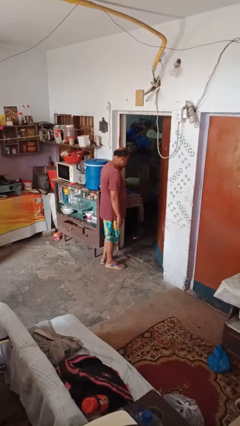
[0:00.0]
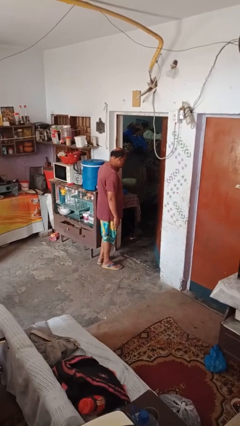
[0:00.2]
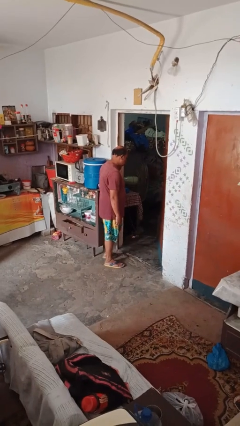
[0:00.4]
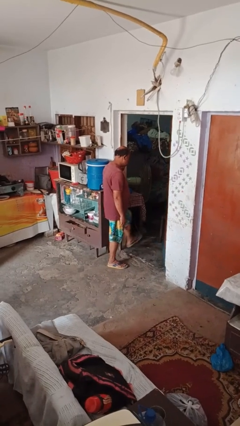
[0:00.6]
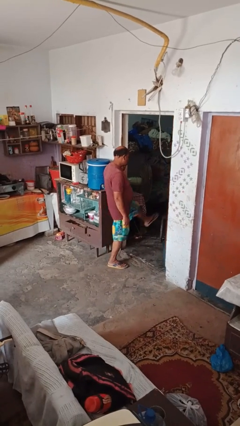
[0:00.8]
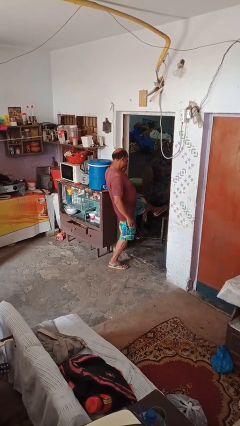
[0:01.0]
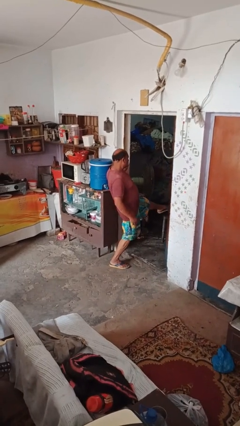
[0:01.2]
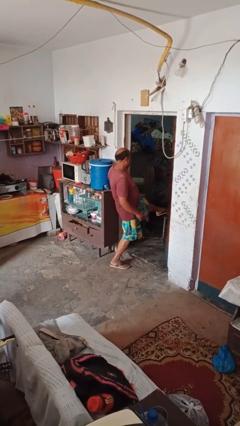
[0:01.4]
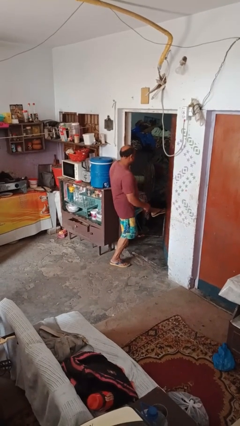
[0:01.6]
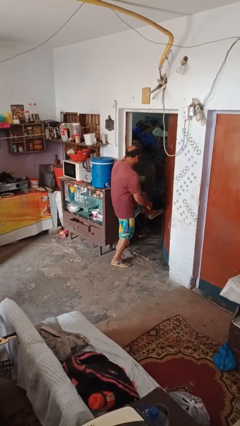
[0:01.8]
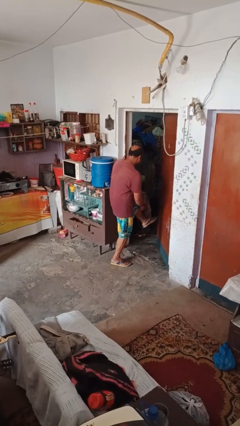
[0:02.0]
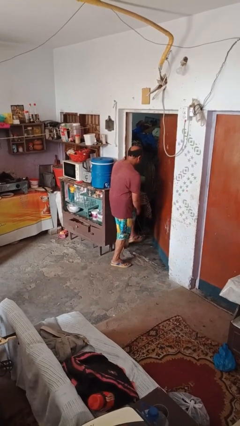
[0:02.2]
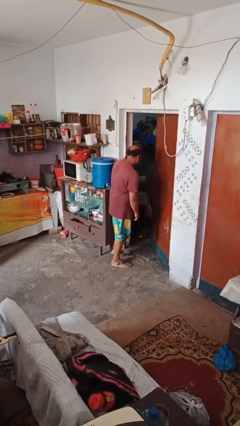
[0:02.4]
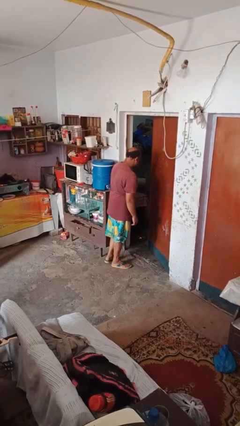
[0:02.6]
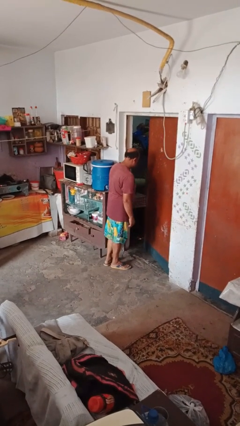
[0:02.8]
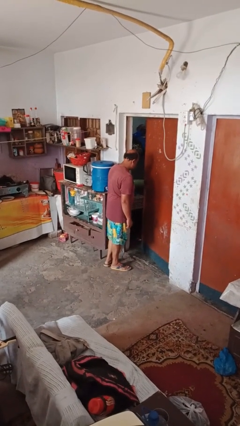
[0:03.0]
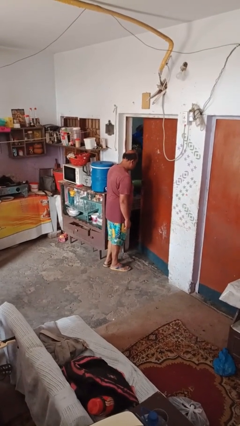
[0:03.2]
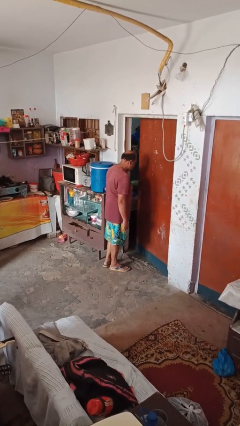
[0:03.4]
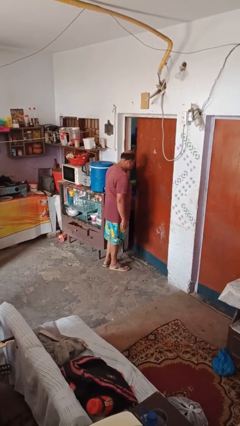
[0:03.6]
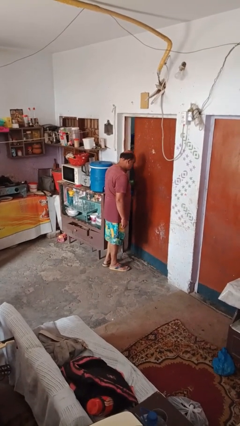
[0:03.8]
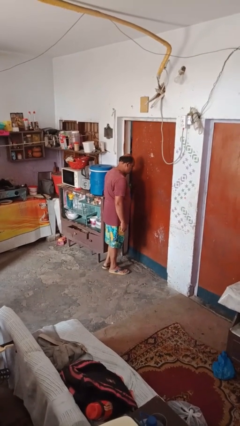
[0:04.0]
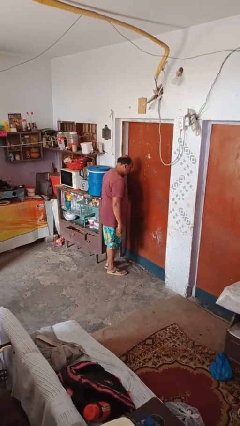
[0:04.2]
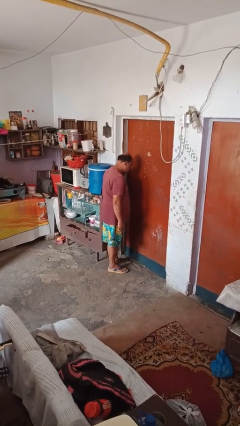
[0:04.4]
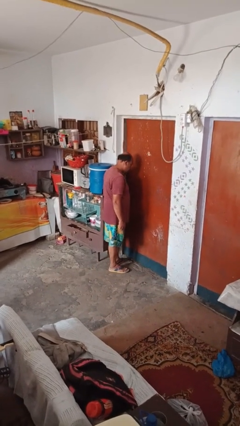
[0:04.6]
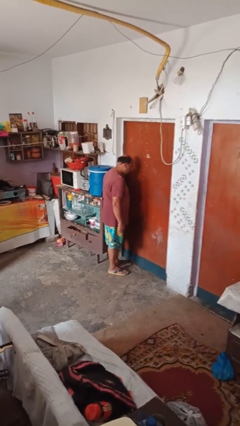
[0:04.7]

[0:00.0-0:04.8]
person closes door with foot

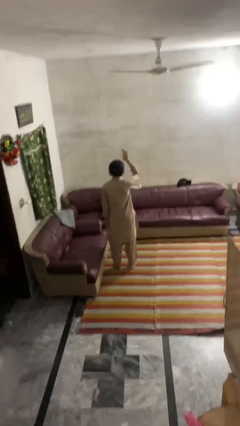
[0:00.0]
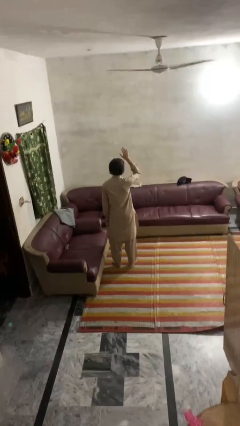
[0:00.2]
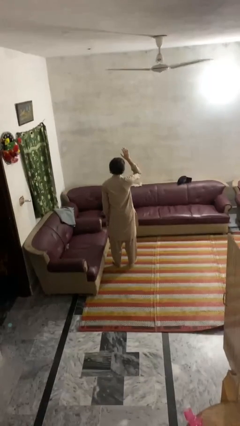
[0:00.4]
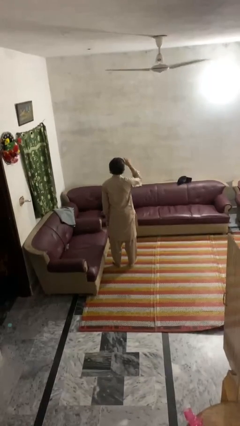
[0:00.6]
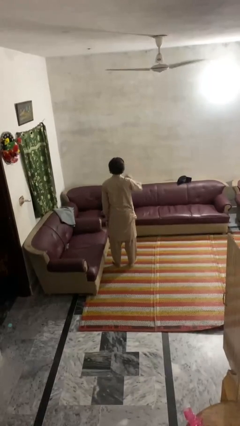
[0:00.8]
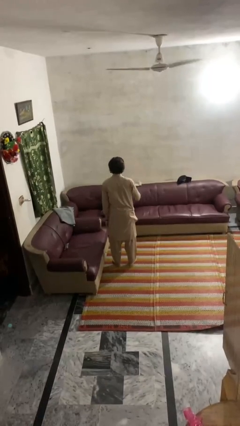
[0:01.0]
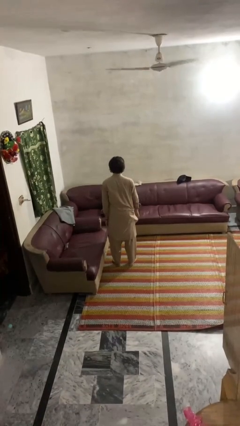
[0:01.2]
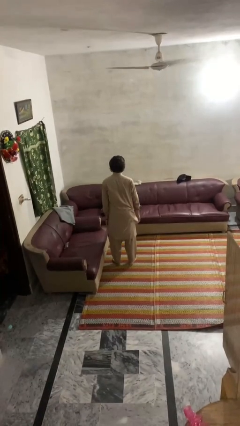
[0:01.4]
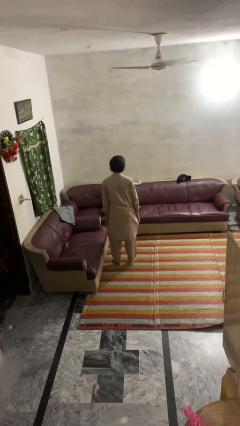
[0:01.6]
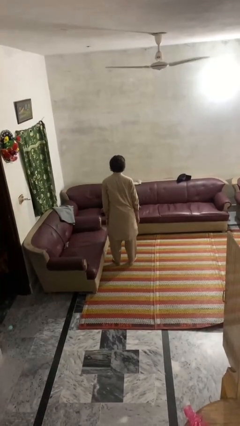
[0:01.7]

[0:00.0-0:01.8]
person gestures lower hand

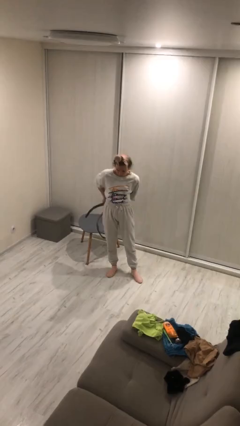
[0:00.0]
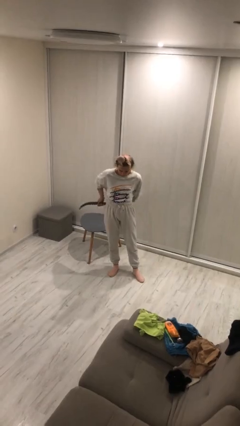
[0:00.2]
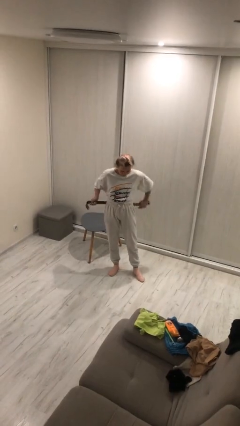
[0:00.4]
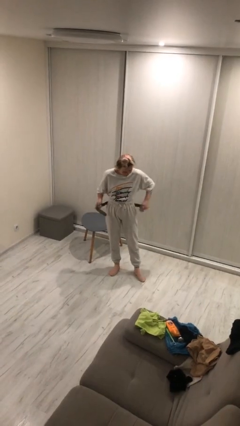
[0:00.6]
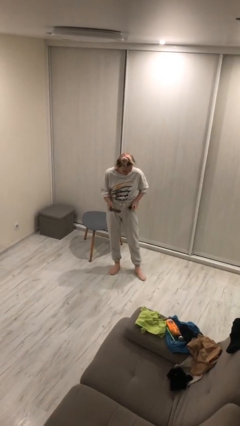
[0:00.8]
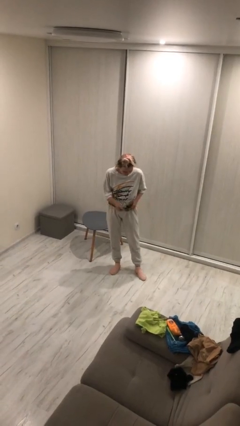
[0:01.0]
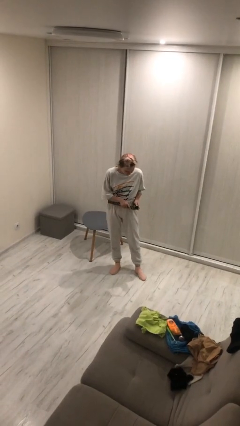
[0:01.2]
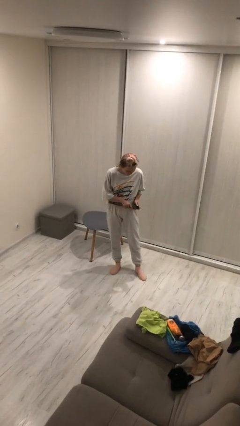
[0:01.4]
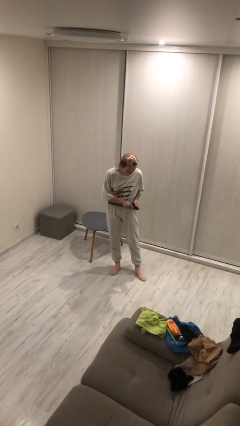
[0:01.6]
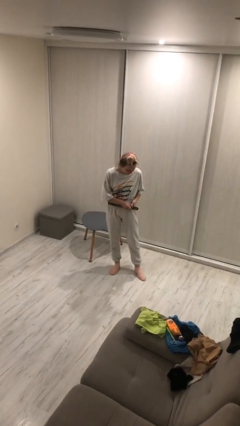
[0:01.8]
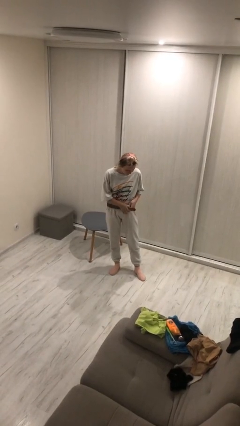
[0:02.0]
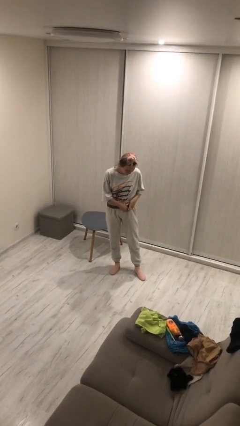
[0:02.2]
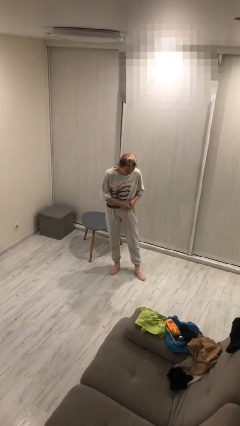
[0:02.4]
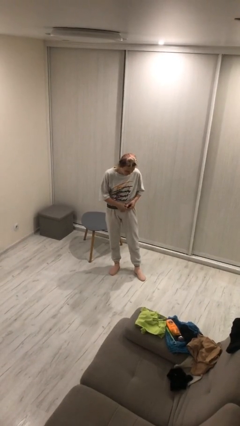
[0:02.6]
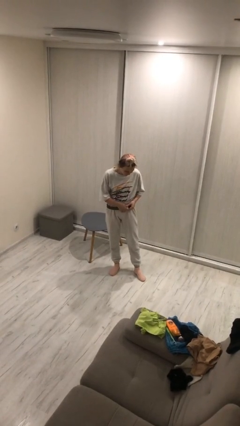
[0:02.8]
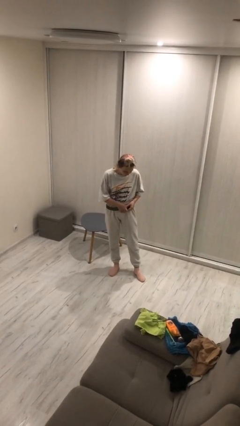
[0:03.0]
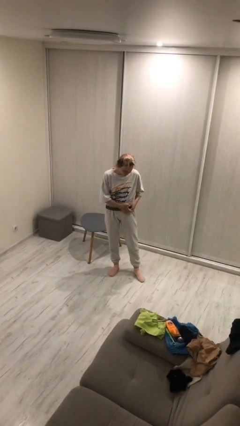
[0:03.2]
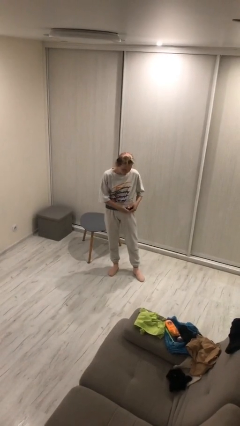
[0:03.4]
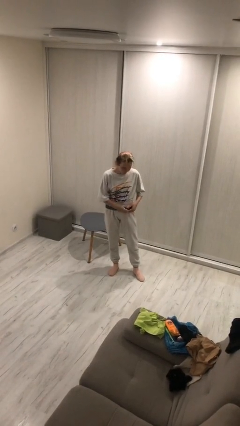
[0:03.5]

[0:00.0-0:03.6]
person puts on belt

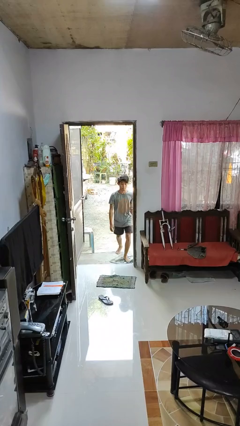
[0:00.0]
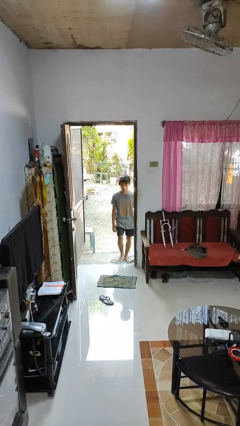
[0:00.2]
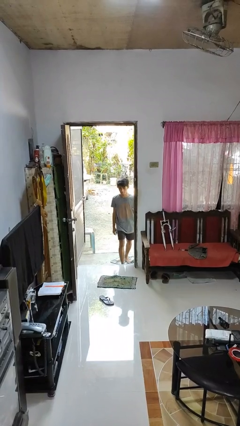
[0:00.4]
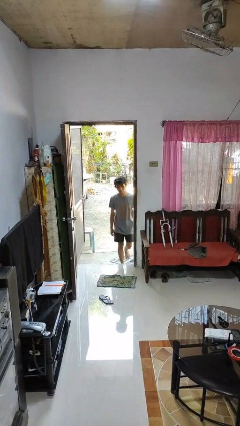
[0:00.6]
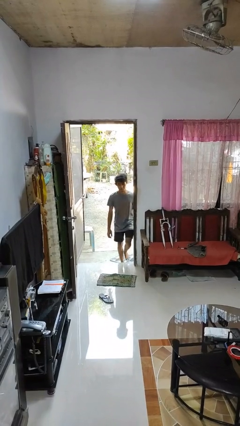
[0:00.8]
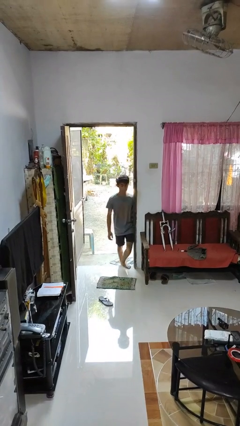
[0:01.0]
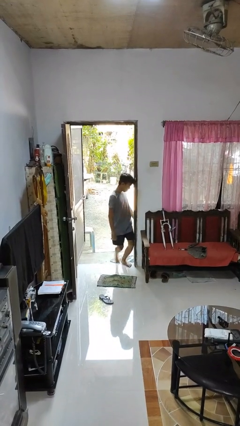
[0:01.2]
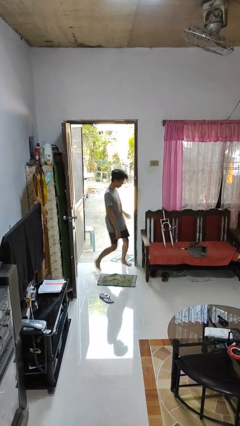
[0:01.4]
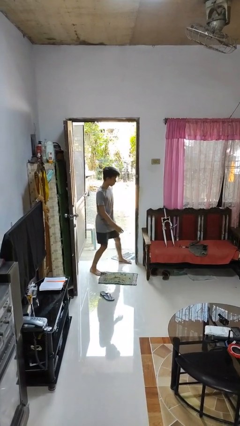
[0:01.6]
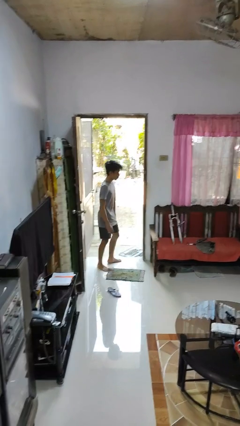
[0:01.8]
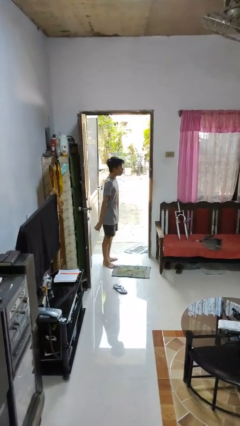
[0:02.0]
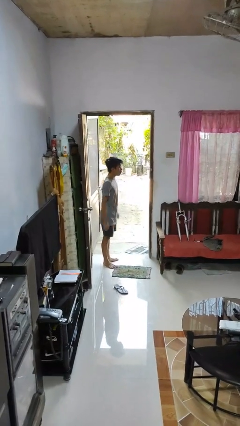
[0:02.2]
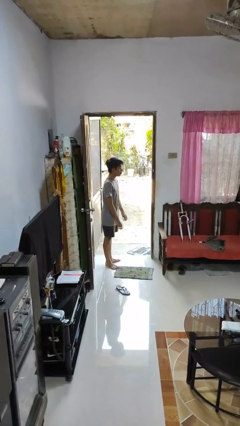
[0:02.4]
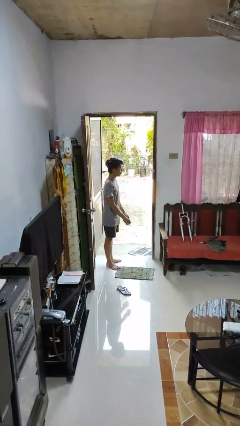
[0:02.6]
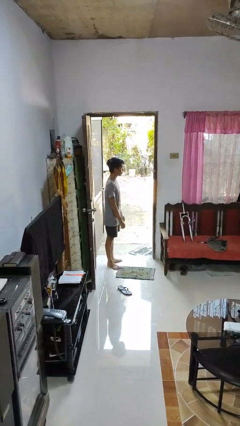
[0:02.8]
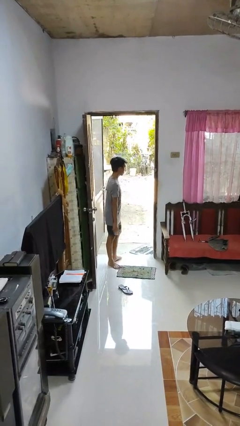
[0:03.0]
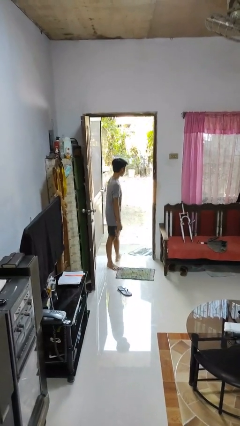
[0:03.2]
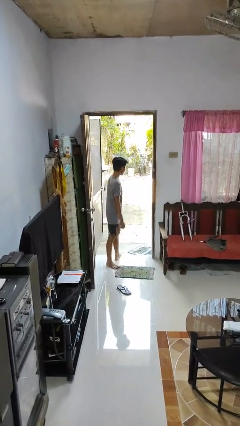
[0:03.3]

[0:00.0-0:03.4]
person bumps into wall

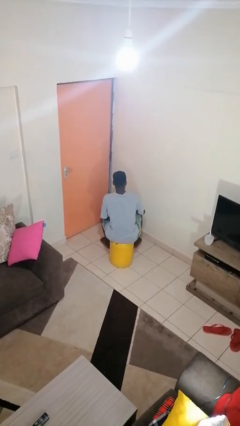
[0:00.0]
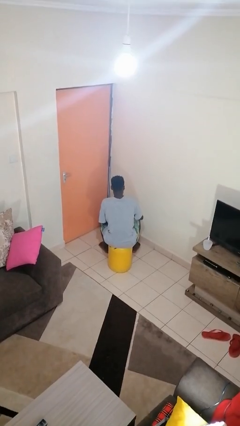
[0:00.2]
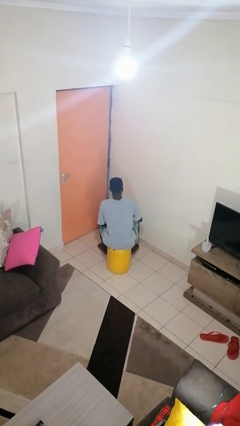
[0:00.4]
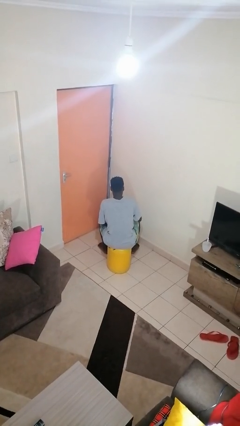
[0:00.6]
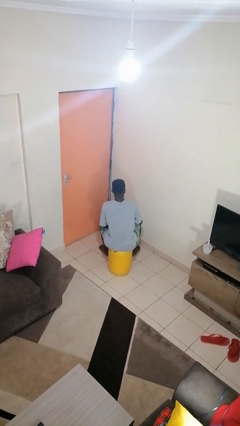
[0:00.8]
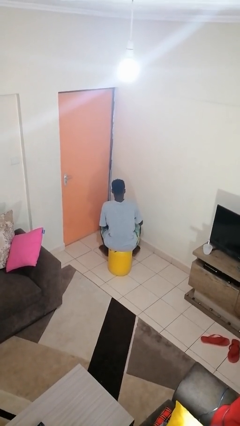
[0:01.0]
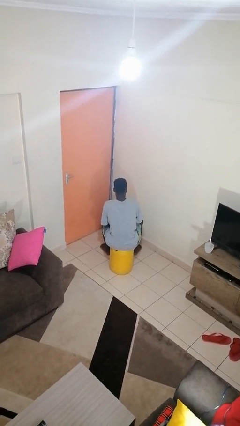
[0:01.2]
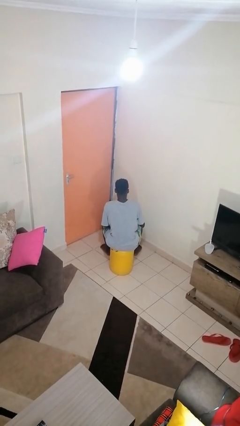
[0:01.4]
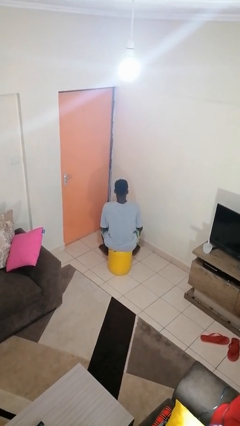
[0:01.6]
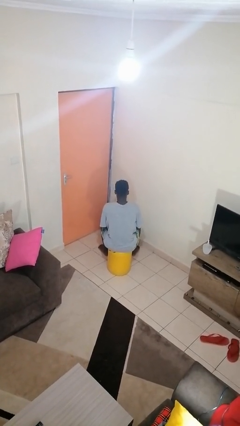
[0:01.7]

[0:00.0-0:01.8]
person stirs mug

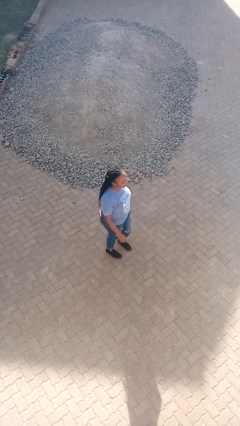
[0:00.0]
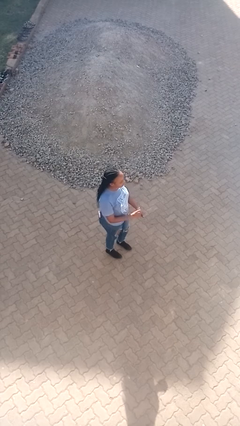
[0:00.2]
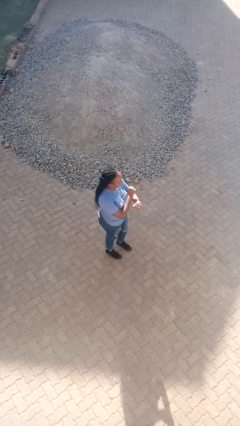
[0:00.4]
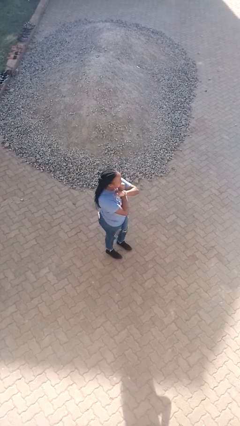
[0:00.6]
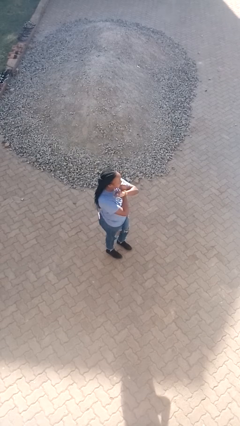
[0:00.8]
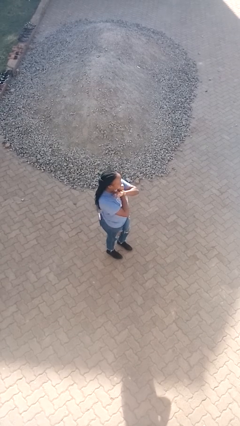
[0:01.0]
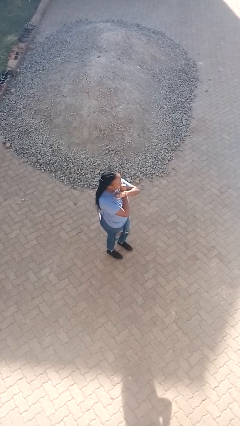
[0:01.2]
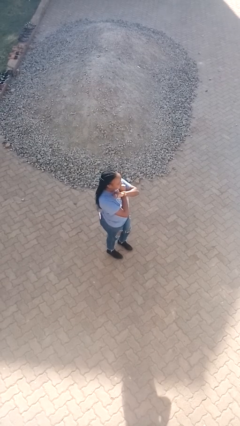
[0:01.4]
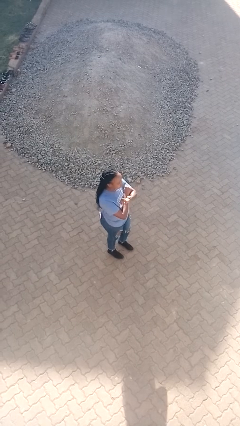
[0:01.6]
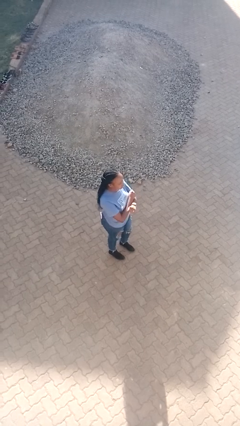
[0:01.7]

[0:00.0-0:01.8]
person gestures arms x

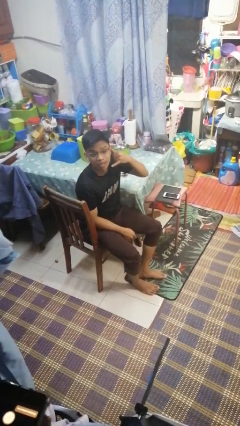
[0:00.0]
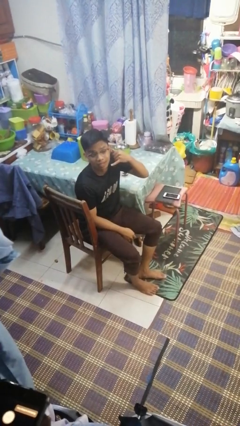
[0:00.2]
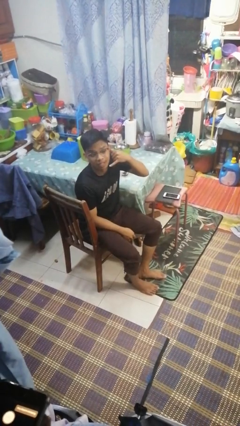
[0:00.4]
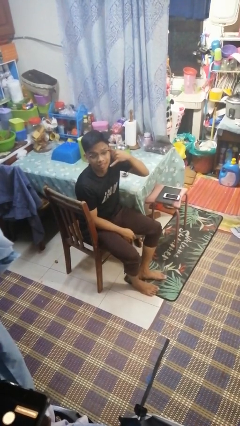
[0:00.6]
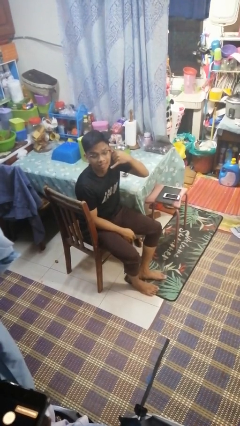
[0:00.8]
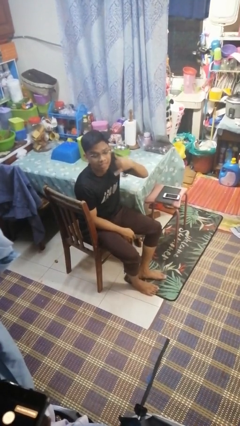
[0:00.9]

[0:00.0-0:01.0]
person gestures call me
